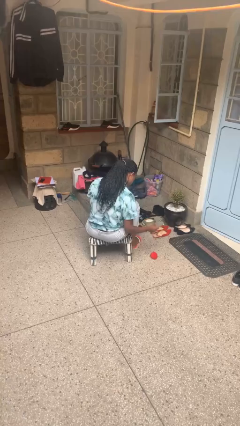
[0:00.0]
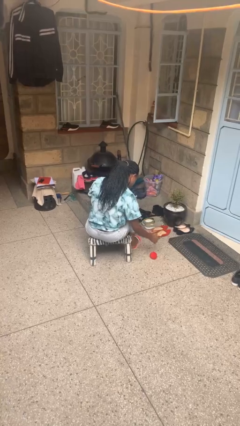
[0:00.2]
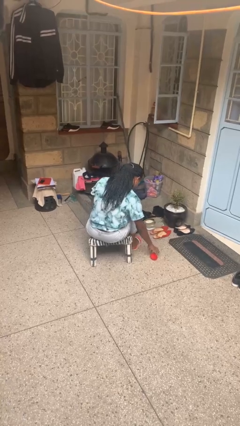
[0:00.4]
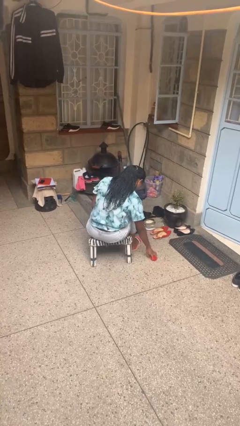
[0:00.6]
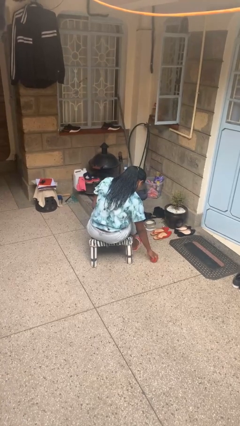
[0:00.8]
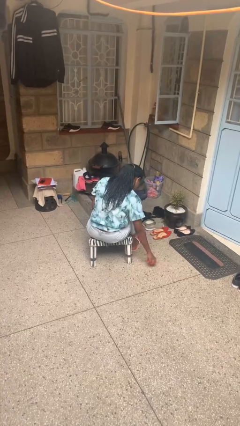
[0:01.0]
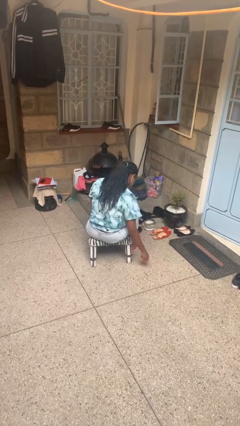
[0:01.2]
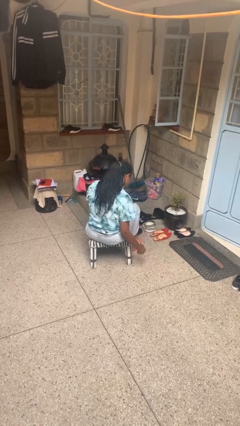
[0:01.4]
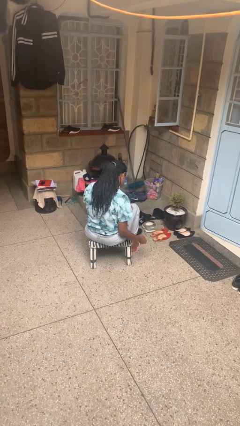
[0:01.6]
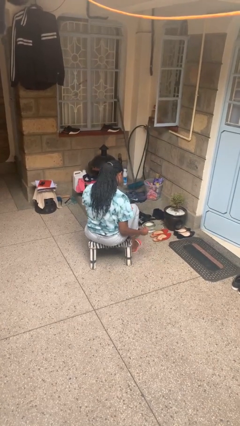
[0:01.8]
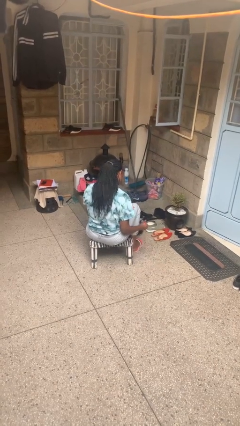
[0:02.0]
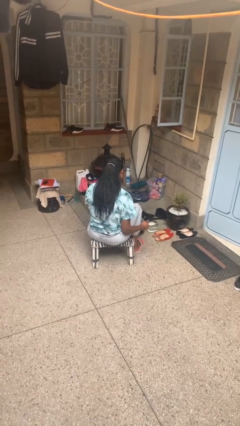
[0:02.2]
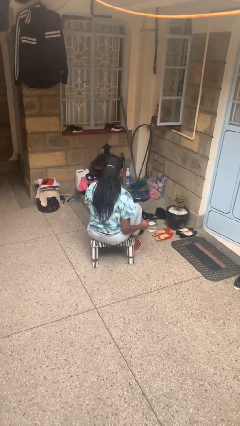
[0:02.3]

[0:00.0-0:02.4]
person picks up object from floor

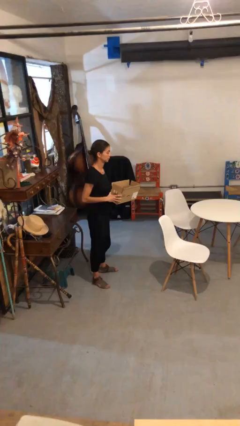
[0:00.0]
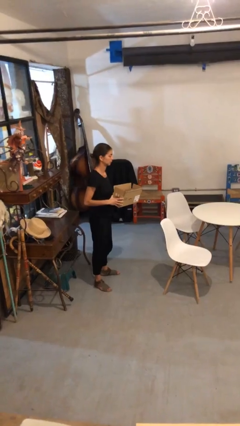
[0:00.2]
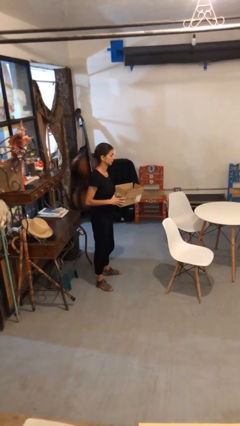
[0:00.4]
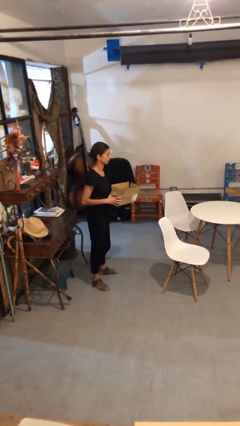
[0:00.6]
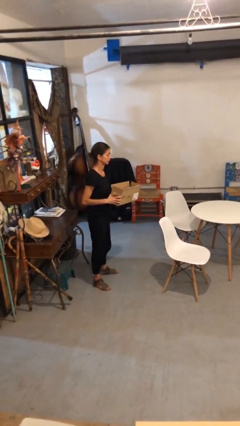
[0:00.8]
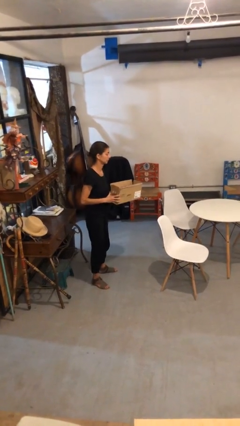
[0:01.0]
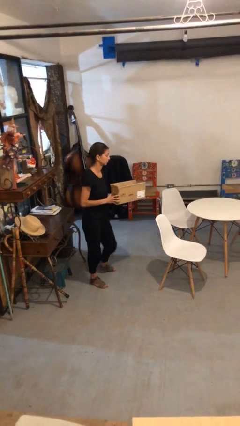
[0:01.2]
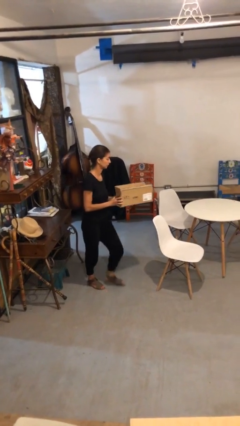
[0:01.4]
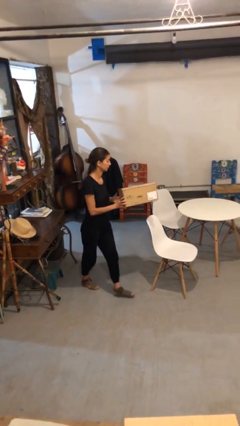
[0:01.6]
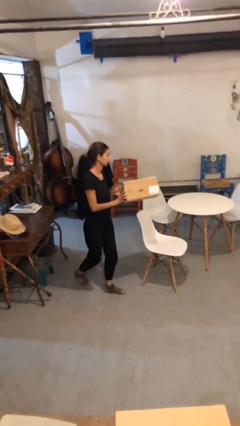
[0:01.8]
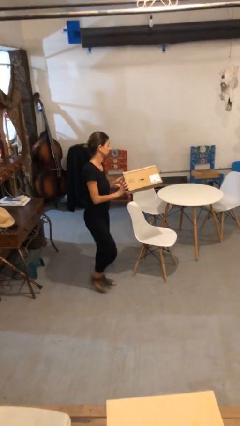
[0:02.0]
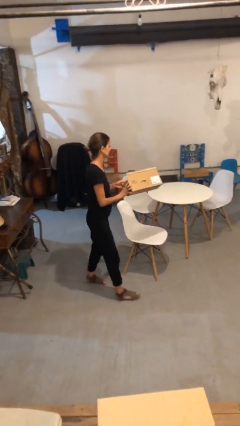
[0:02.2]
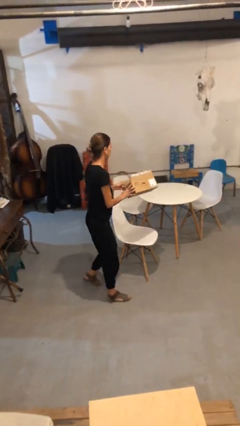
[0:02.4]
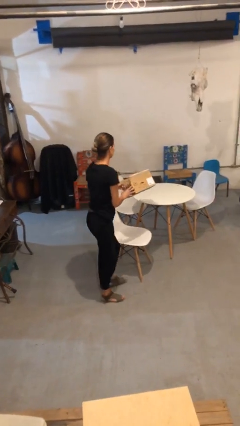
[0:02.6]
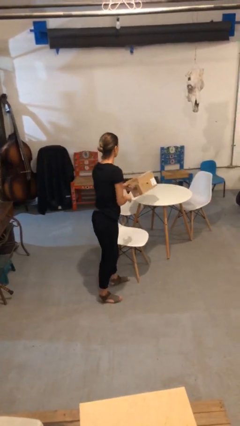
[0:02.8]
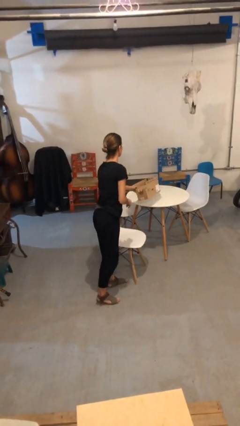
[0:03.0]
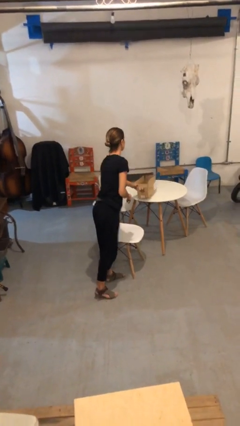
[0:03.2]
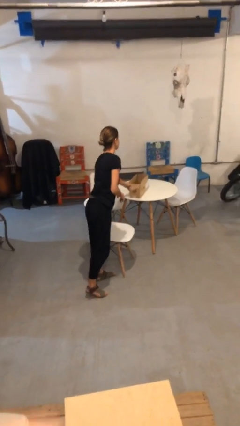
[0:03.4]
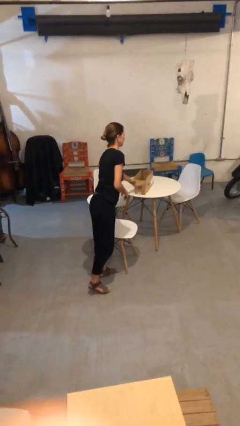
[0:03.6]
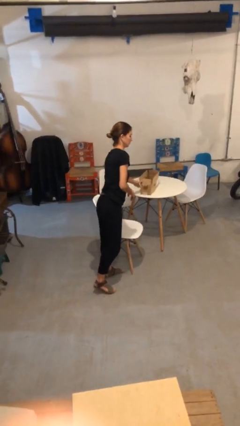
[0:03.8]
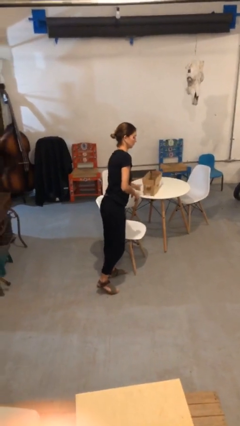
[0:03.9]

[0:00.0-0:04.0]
person puts down object on table

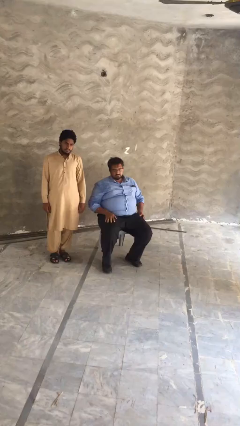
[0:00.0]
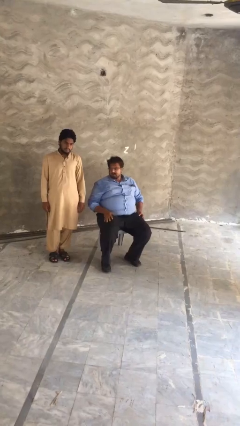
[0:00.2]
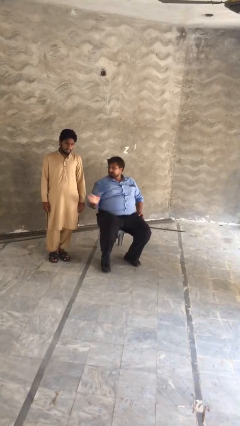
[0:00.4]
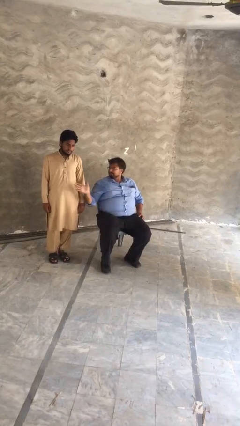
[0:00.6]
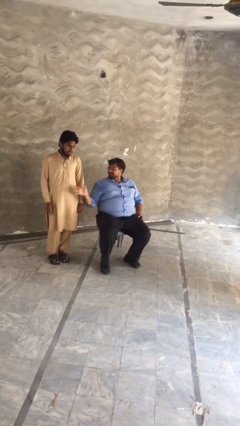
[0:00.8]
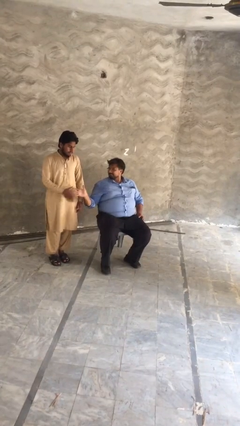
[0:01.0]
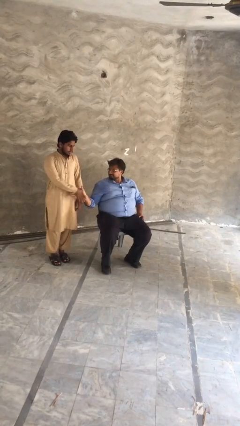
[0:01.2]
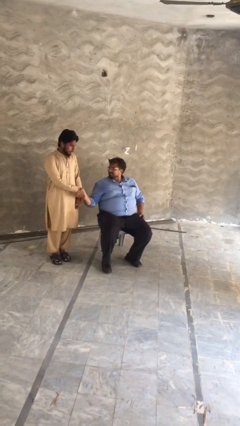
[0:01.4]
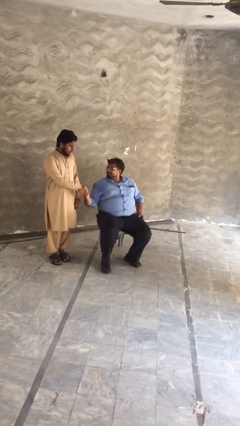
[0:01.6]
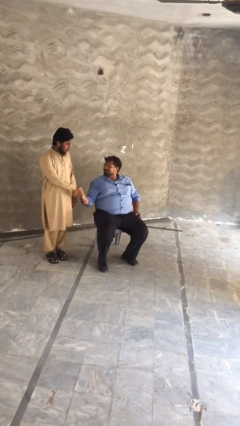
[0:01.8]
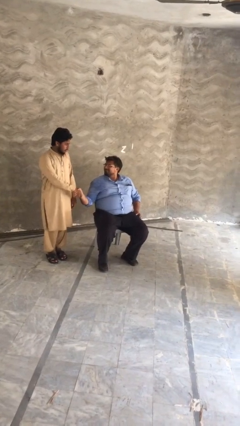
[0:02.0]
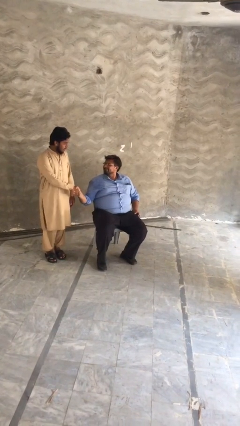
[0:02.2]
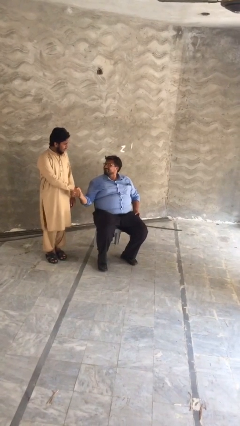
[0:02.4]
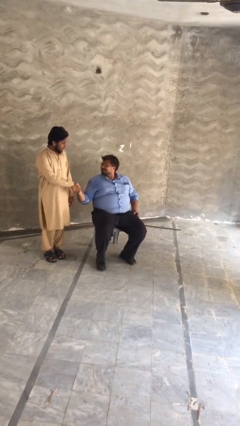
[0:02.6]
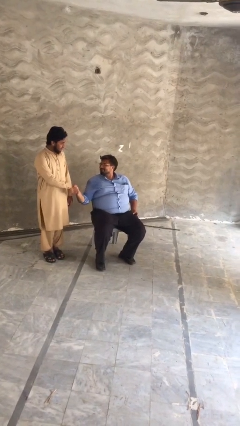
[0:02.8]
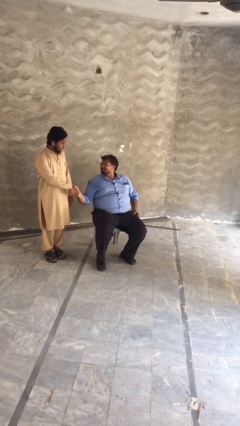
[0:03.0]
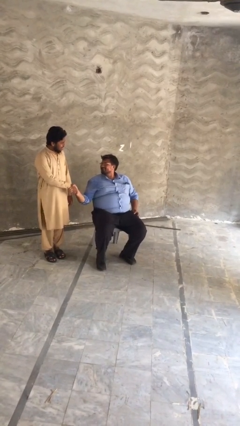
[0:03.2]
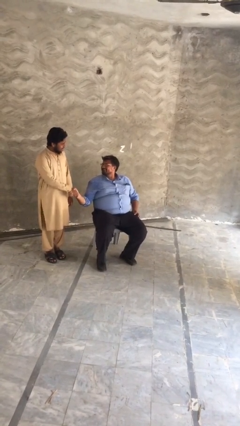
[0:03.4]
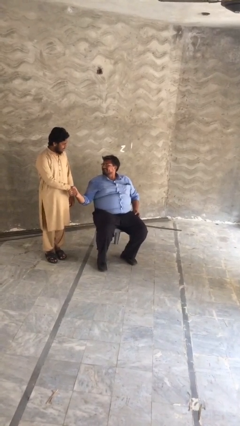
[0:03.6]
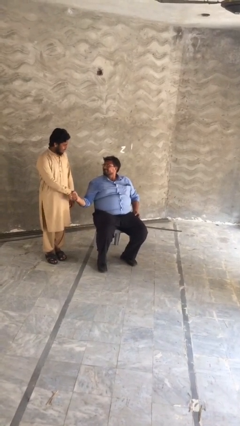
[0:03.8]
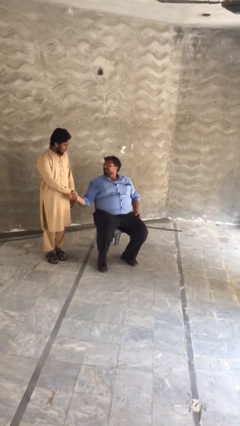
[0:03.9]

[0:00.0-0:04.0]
person shakes hand

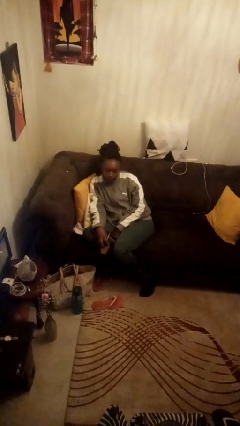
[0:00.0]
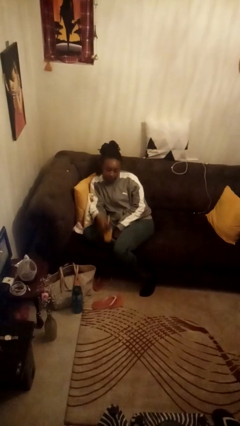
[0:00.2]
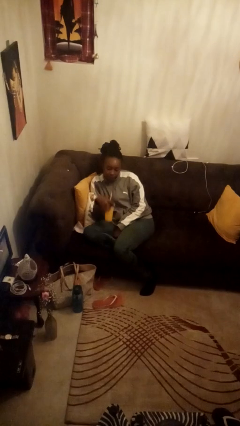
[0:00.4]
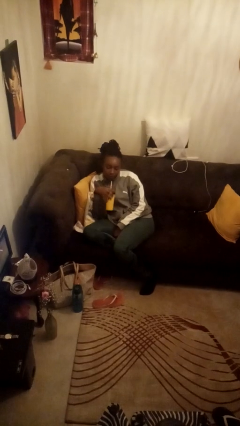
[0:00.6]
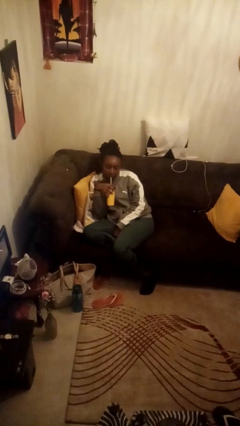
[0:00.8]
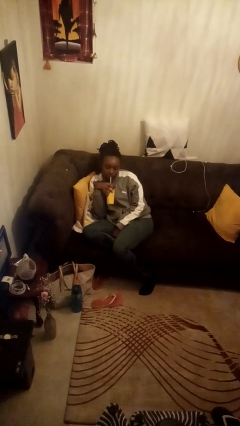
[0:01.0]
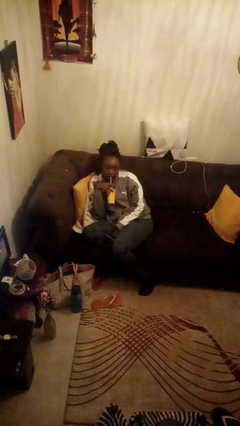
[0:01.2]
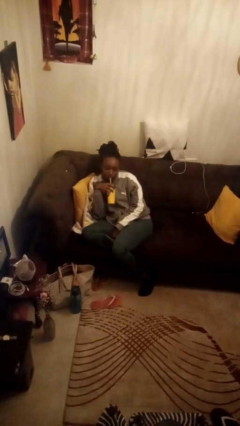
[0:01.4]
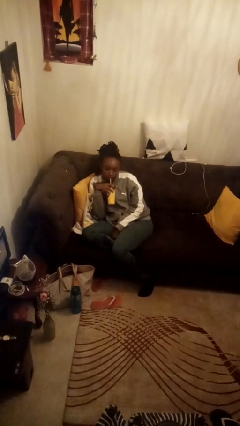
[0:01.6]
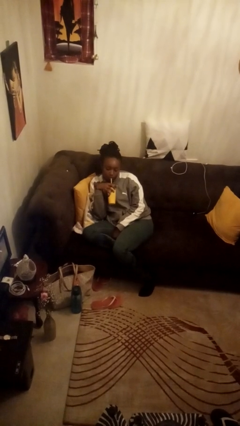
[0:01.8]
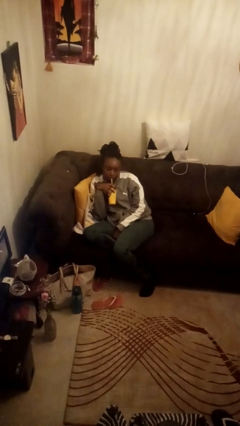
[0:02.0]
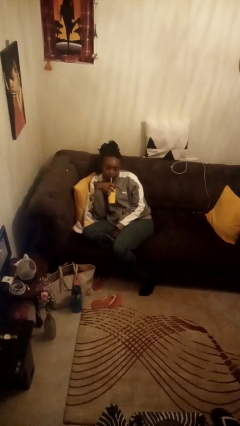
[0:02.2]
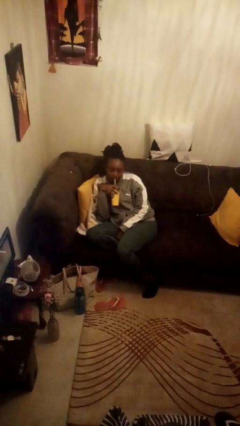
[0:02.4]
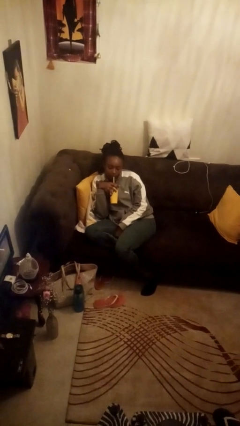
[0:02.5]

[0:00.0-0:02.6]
person drinks from straw

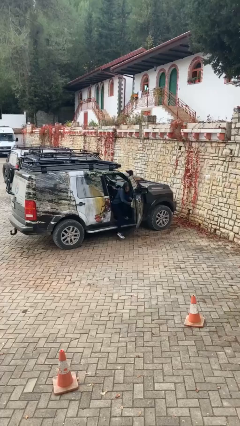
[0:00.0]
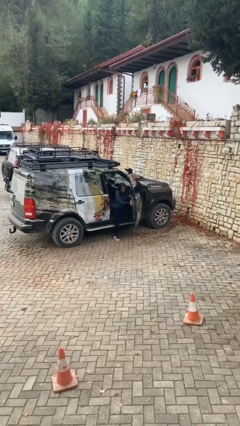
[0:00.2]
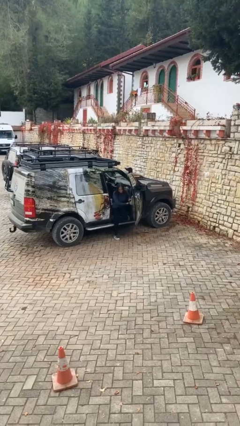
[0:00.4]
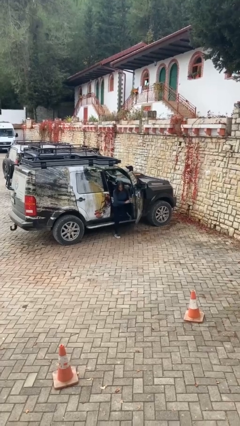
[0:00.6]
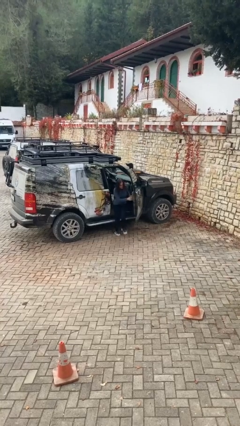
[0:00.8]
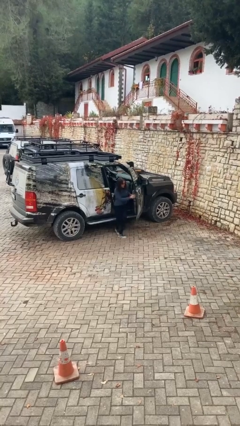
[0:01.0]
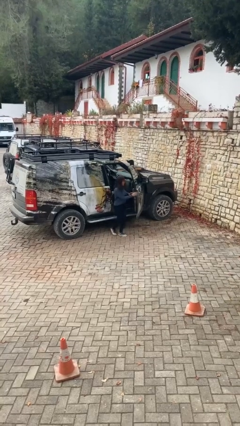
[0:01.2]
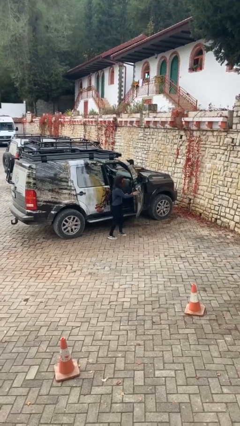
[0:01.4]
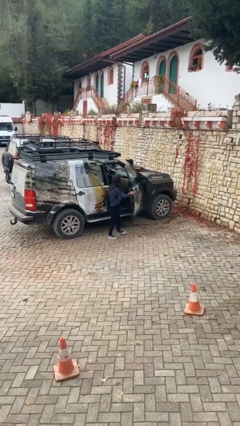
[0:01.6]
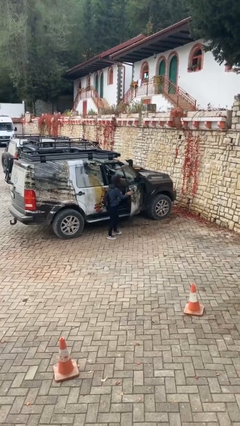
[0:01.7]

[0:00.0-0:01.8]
person exits car

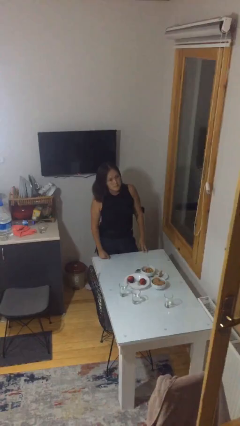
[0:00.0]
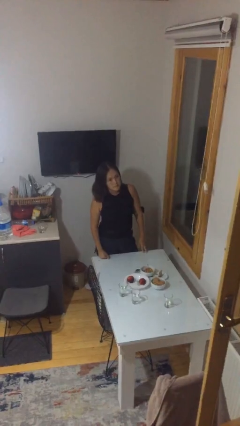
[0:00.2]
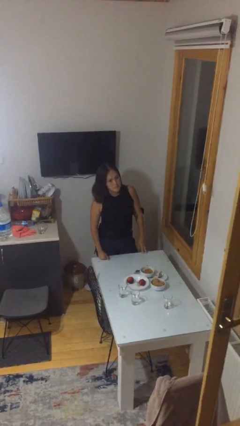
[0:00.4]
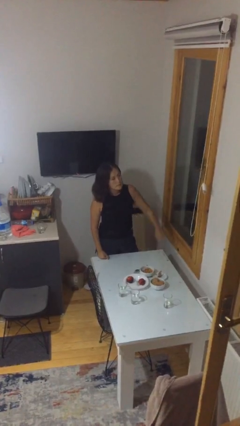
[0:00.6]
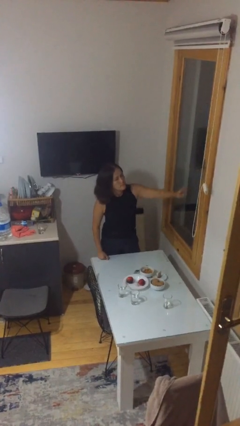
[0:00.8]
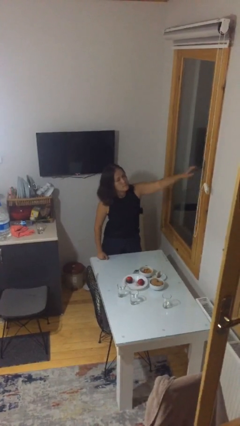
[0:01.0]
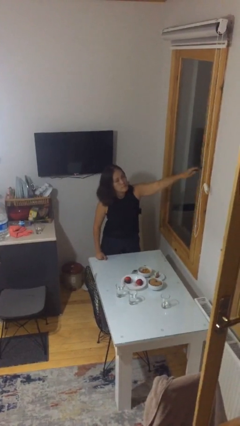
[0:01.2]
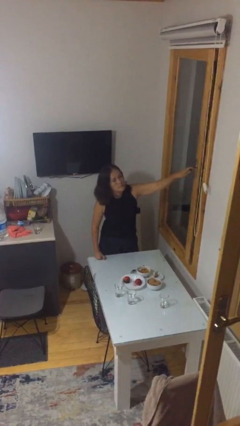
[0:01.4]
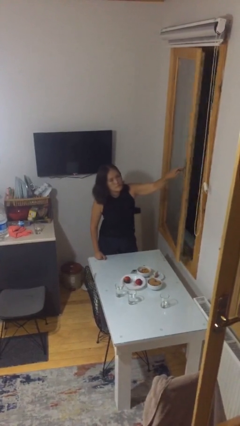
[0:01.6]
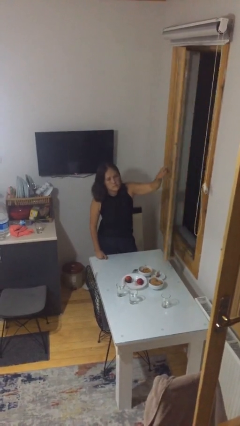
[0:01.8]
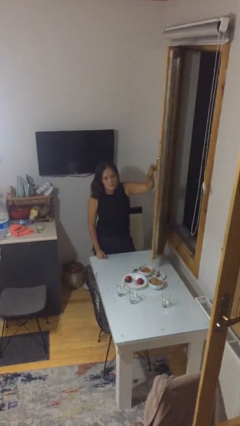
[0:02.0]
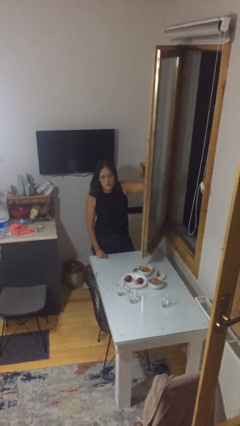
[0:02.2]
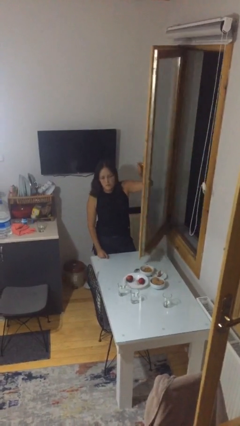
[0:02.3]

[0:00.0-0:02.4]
person opens home window

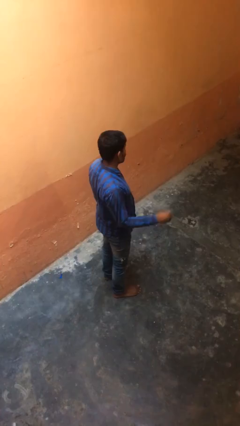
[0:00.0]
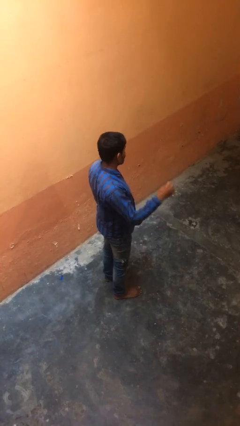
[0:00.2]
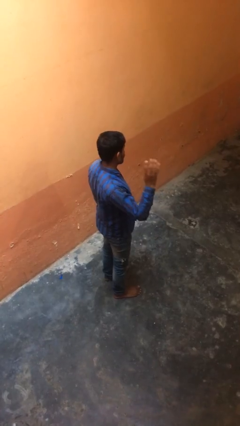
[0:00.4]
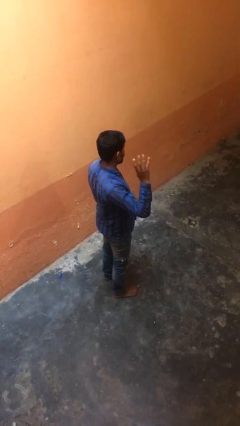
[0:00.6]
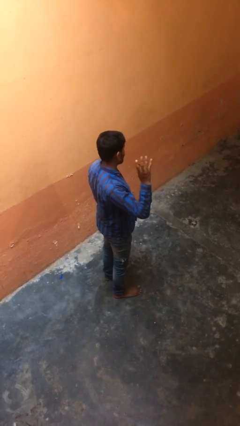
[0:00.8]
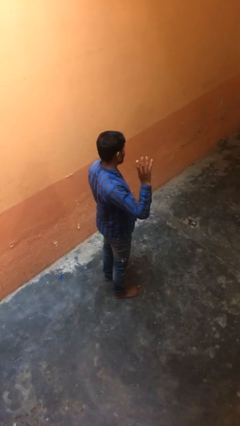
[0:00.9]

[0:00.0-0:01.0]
person gestures number four
